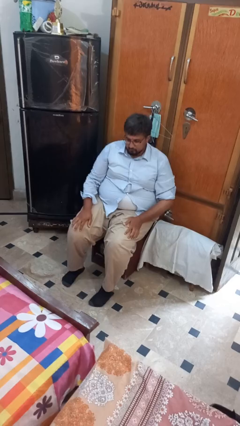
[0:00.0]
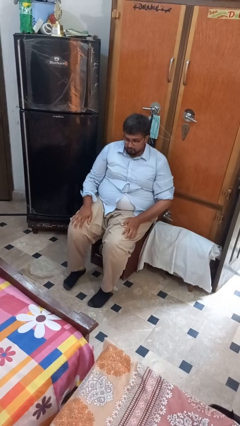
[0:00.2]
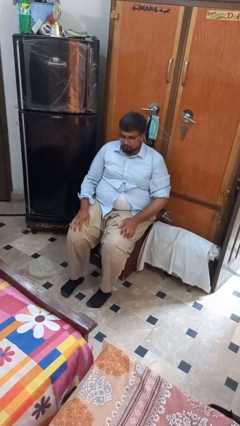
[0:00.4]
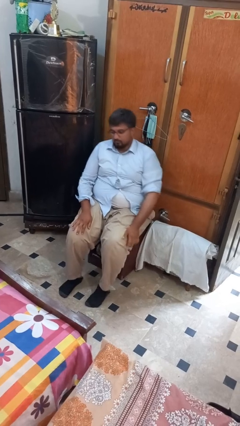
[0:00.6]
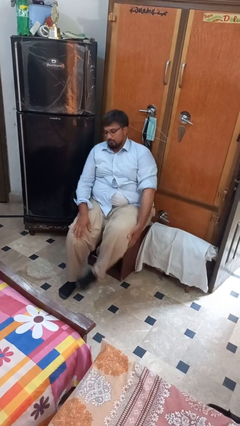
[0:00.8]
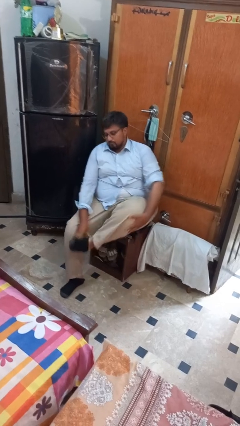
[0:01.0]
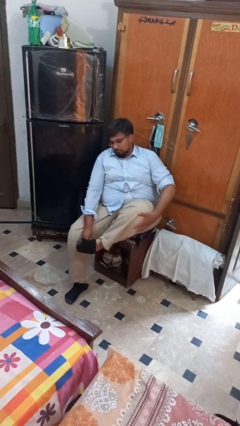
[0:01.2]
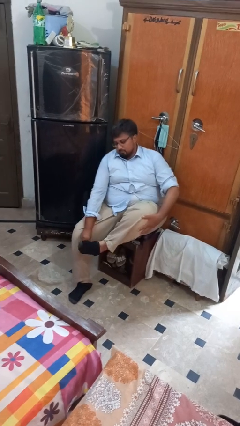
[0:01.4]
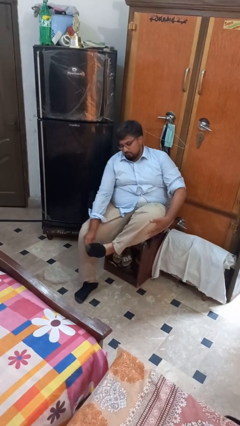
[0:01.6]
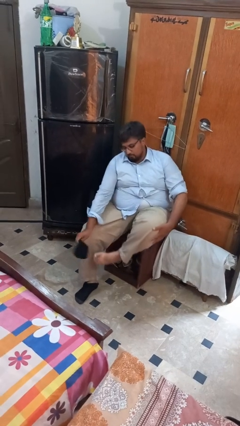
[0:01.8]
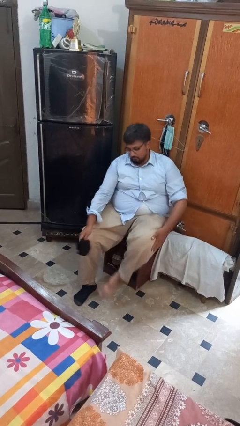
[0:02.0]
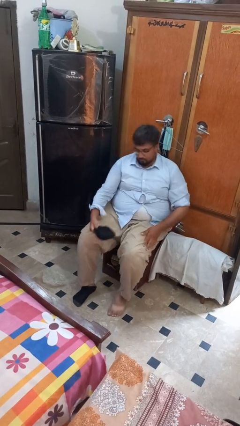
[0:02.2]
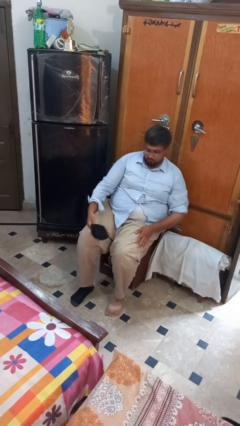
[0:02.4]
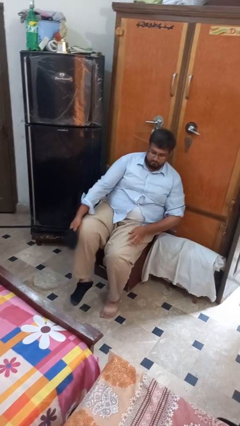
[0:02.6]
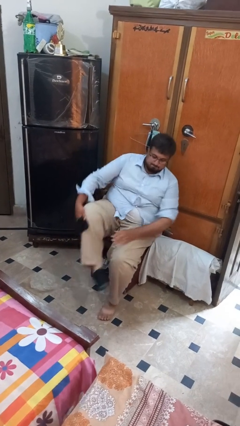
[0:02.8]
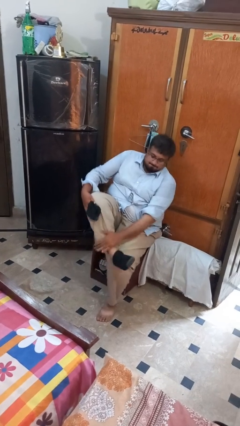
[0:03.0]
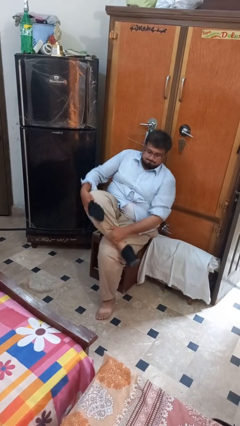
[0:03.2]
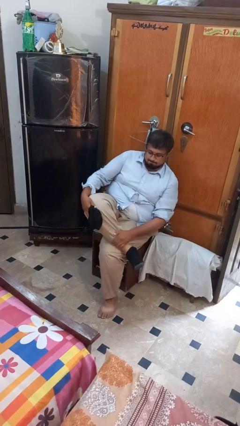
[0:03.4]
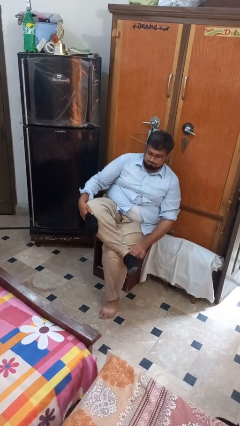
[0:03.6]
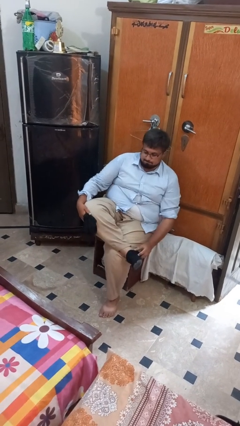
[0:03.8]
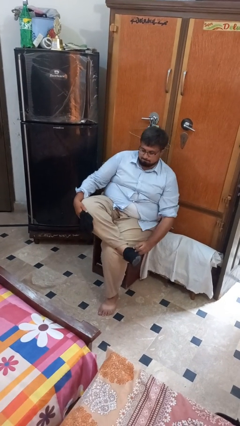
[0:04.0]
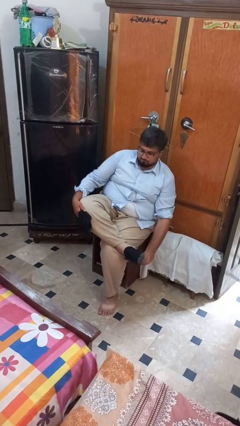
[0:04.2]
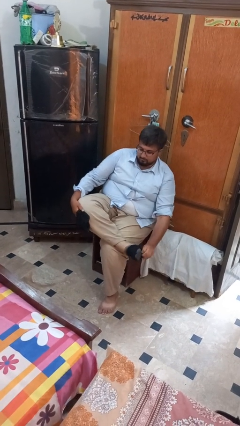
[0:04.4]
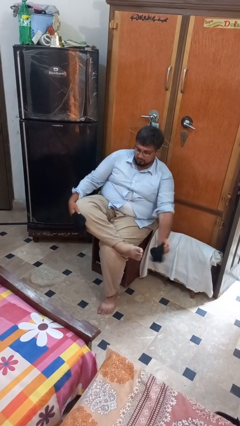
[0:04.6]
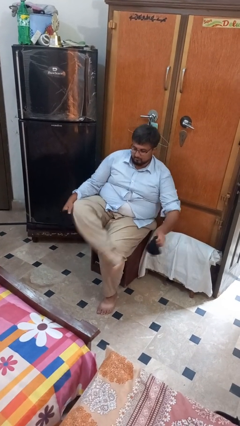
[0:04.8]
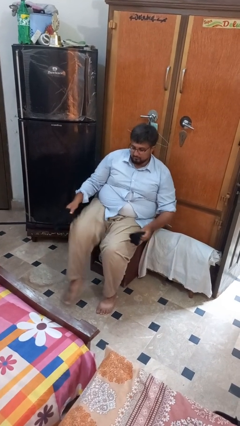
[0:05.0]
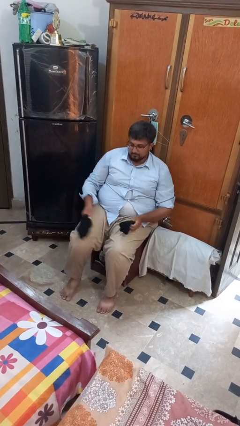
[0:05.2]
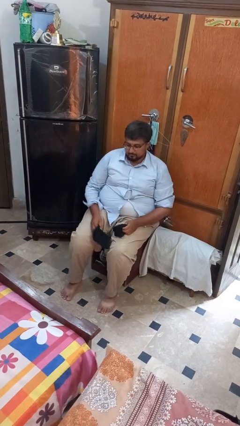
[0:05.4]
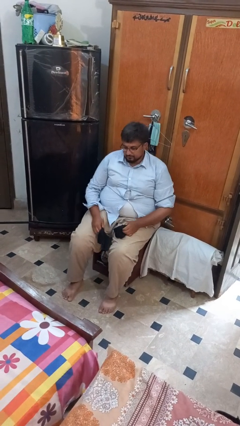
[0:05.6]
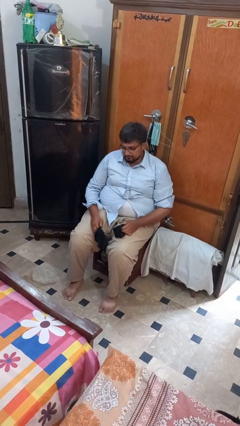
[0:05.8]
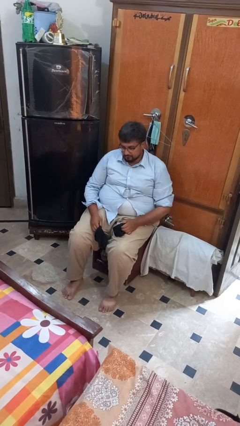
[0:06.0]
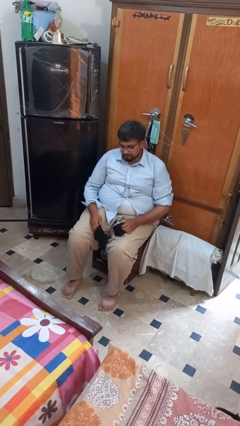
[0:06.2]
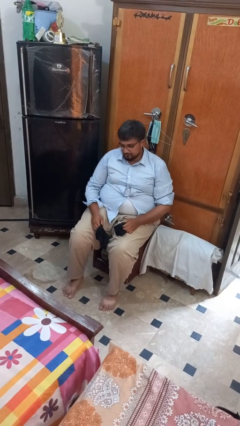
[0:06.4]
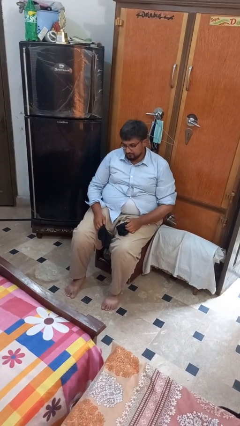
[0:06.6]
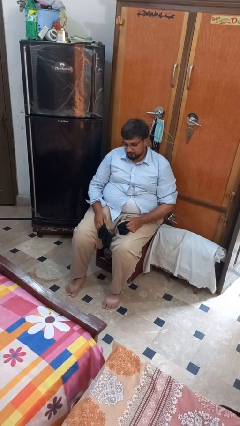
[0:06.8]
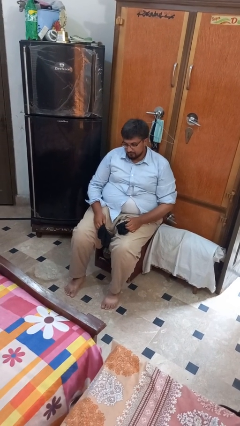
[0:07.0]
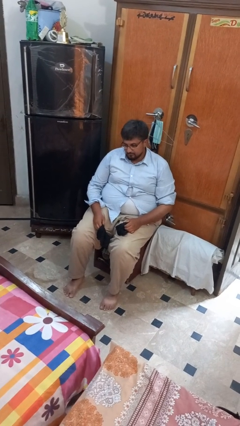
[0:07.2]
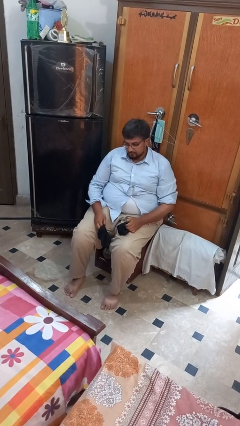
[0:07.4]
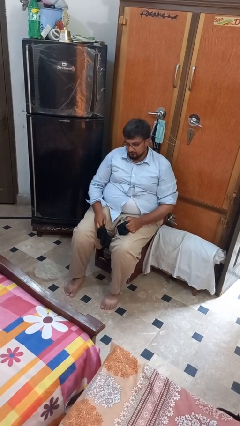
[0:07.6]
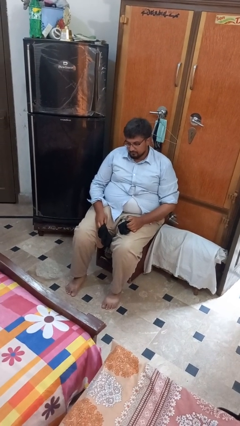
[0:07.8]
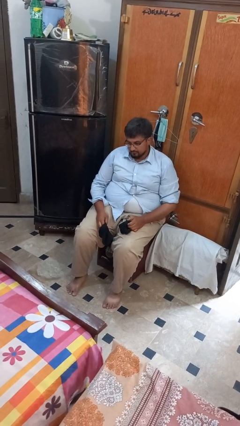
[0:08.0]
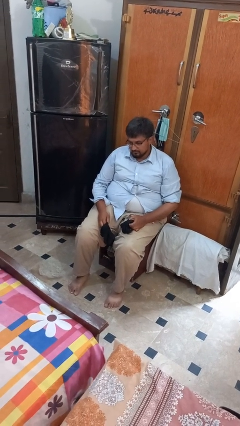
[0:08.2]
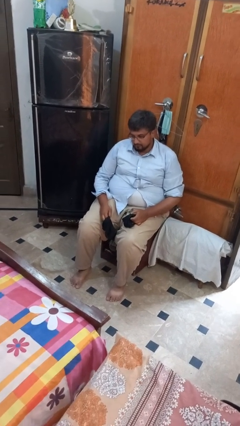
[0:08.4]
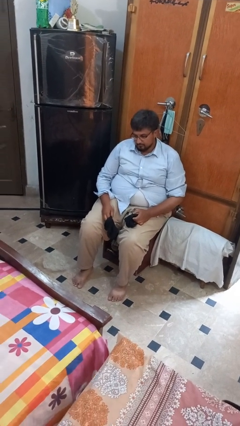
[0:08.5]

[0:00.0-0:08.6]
person takes off socks

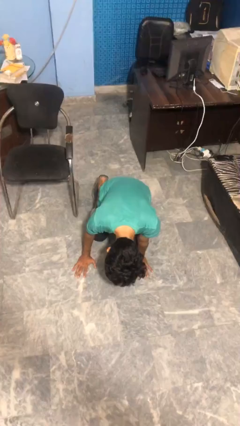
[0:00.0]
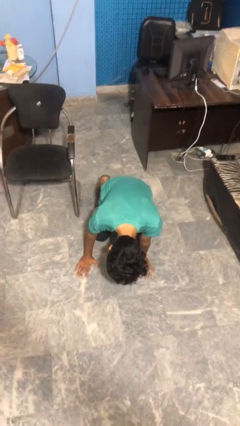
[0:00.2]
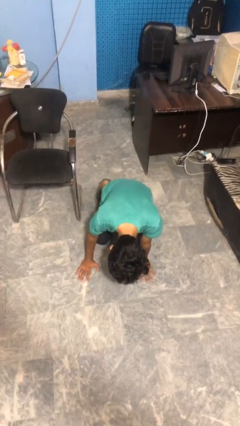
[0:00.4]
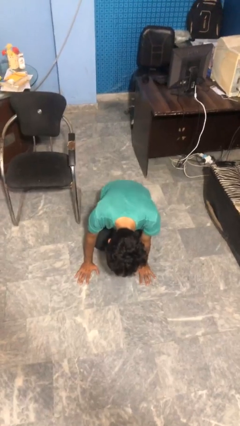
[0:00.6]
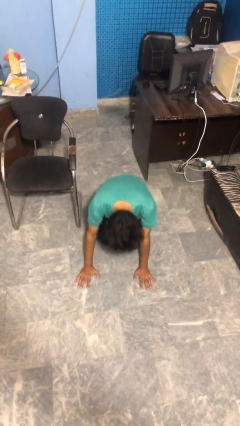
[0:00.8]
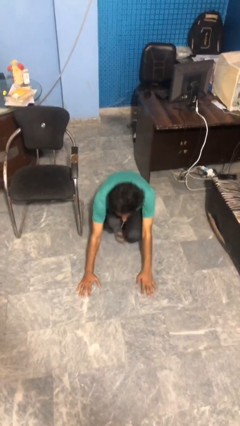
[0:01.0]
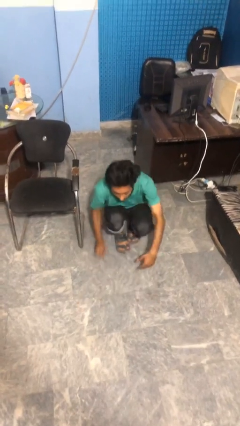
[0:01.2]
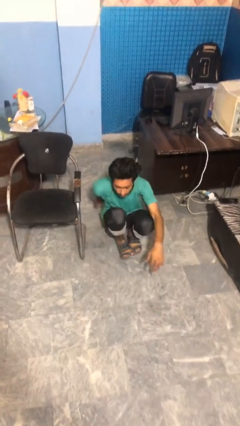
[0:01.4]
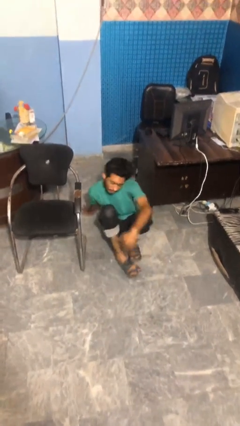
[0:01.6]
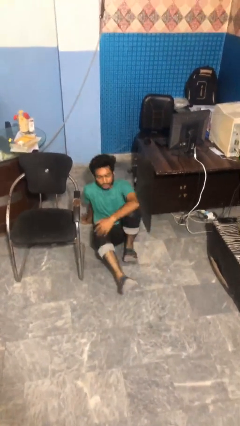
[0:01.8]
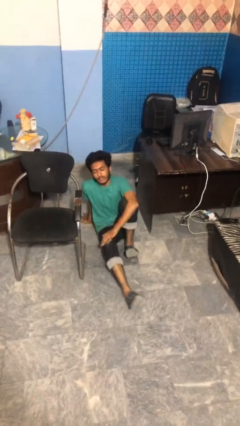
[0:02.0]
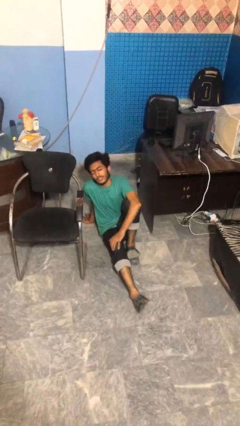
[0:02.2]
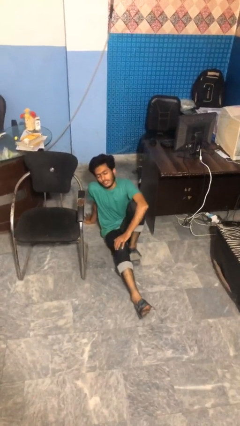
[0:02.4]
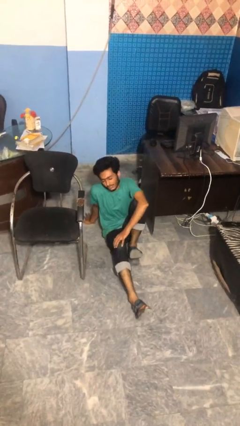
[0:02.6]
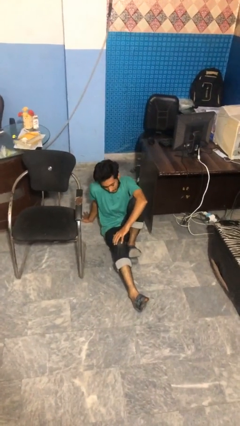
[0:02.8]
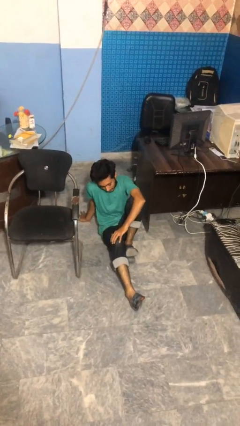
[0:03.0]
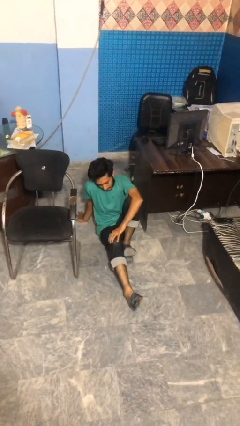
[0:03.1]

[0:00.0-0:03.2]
person lies down on floor

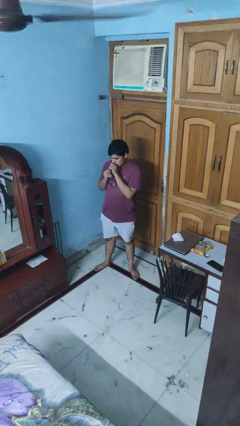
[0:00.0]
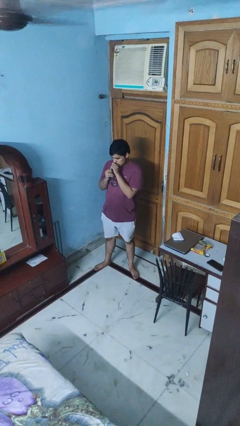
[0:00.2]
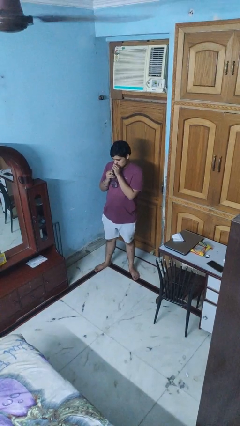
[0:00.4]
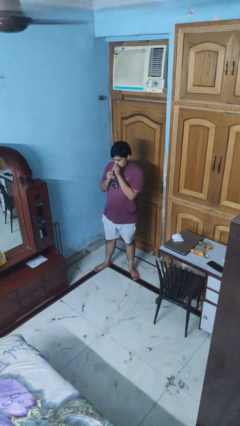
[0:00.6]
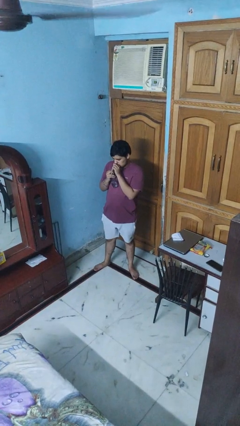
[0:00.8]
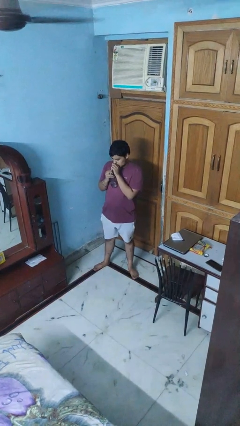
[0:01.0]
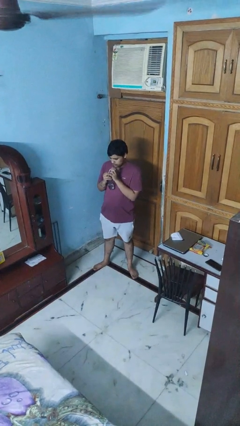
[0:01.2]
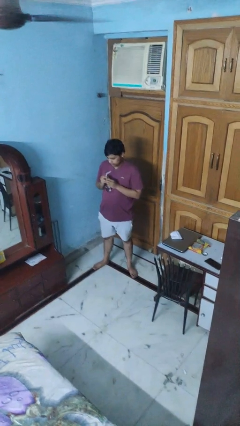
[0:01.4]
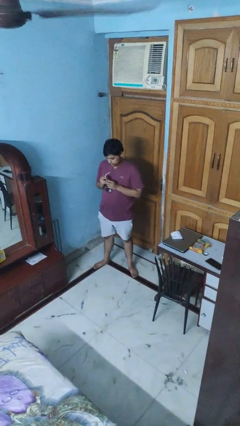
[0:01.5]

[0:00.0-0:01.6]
person drinks from straw

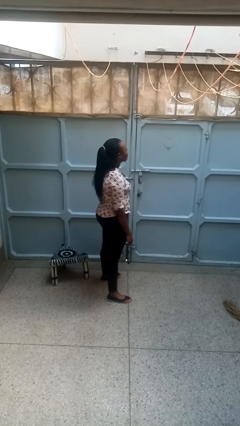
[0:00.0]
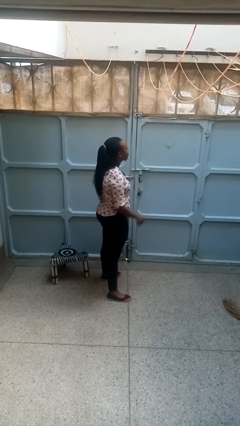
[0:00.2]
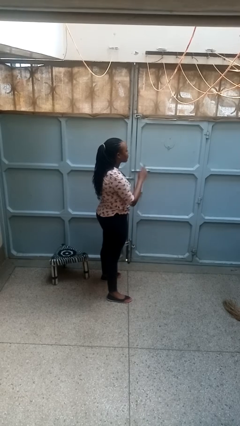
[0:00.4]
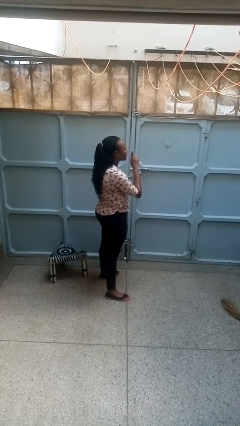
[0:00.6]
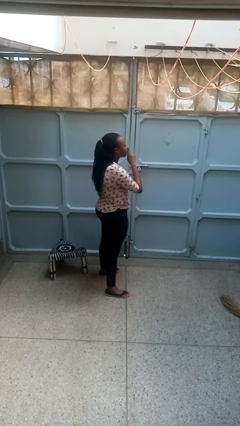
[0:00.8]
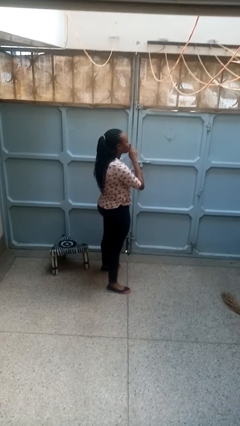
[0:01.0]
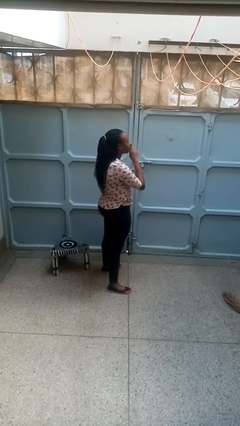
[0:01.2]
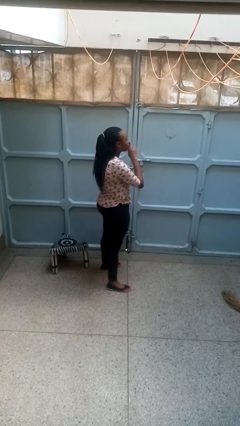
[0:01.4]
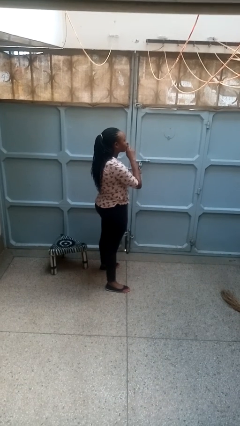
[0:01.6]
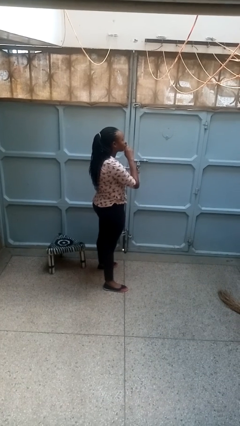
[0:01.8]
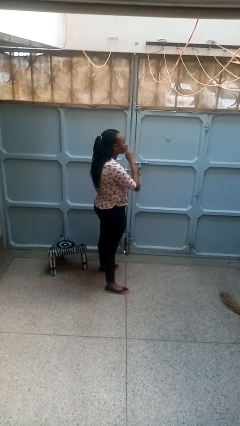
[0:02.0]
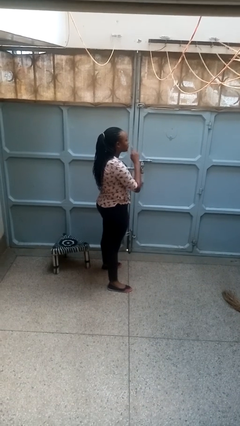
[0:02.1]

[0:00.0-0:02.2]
person gestures be quiet

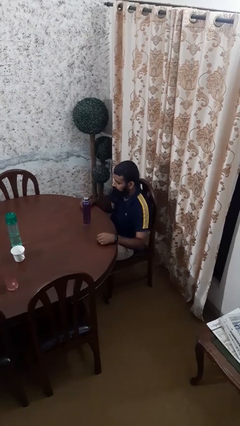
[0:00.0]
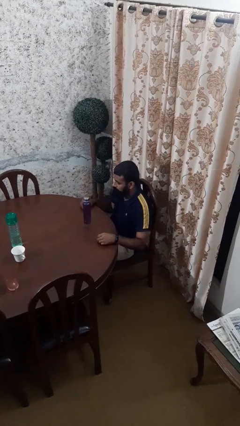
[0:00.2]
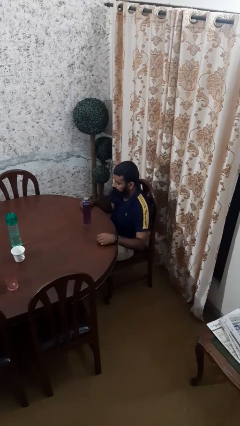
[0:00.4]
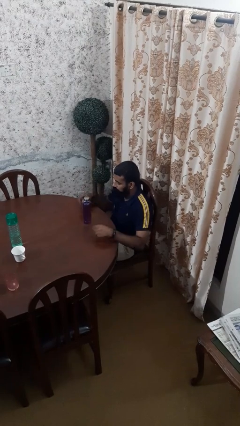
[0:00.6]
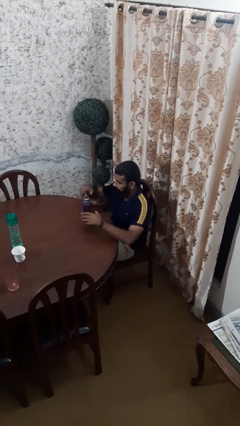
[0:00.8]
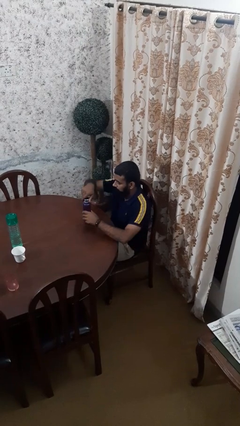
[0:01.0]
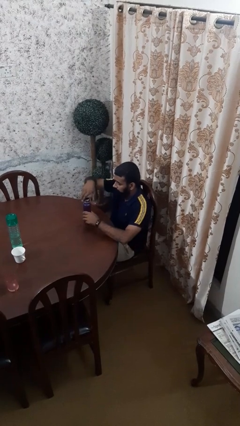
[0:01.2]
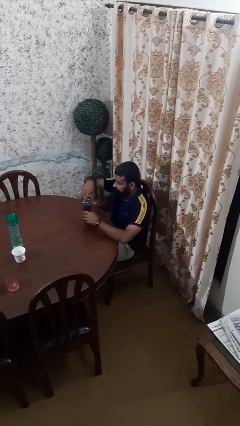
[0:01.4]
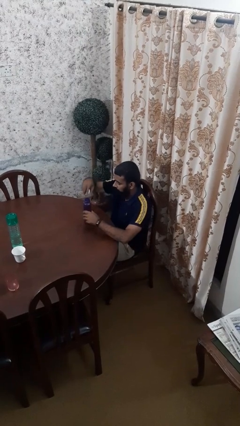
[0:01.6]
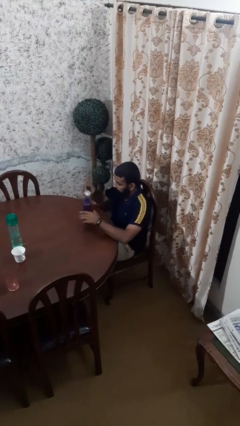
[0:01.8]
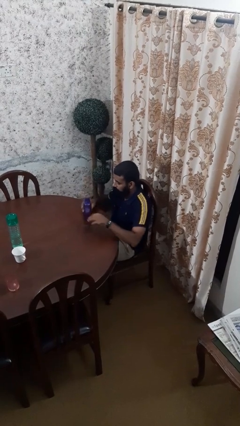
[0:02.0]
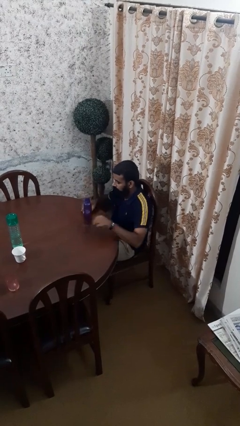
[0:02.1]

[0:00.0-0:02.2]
person unscrews lid from bottle
